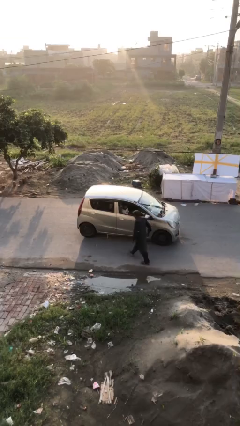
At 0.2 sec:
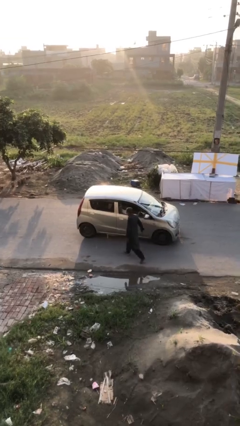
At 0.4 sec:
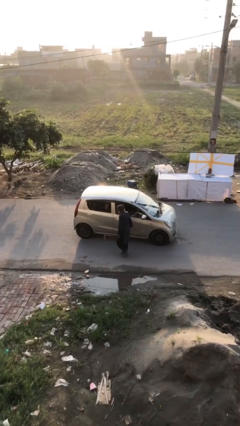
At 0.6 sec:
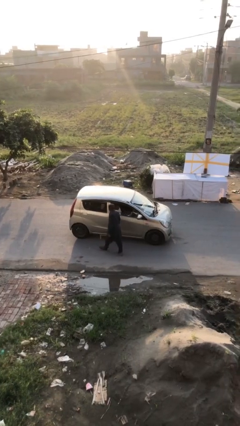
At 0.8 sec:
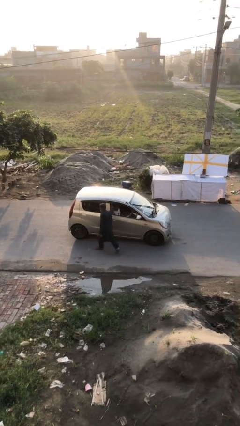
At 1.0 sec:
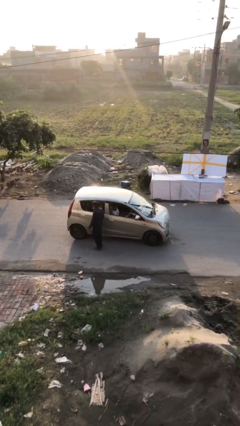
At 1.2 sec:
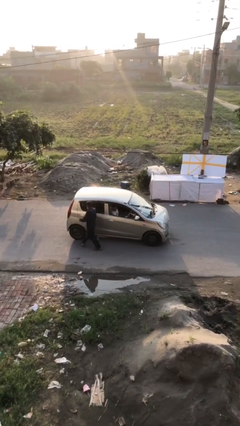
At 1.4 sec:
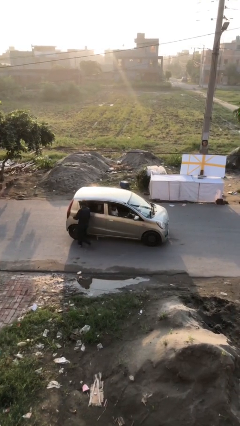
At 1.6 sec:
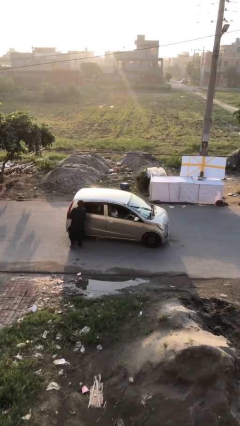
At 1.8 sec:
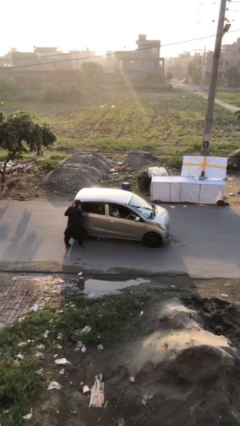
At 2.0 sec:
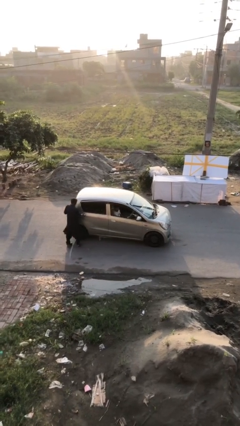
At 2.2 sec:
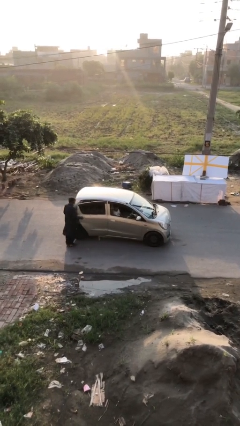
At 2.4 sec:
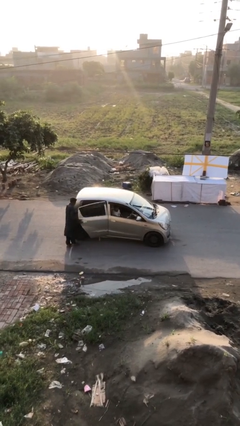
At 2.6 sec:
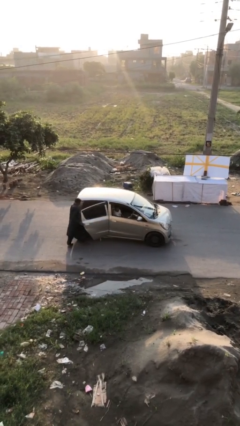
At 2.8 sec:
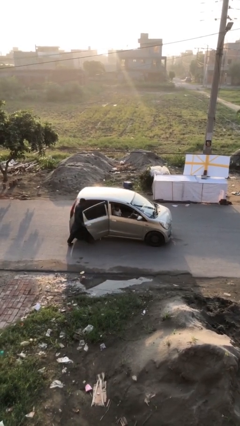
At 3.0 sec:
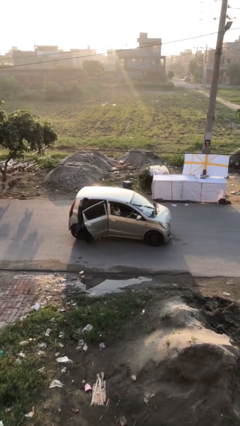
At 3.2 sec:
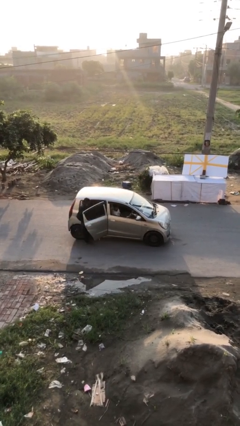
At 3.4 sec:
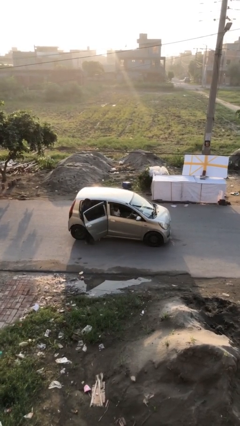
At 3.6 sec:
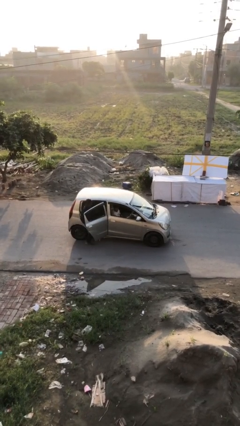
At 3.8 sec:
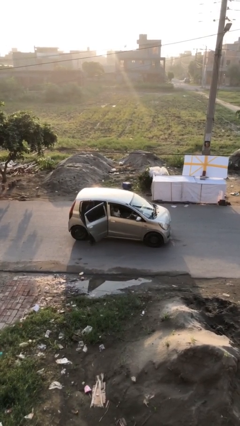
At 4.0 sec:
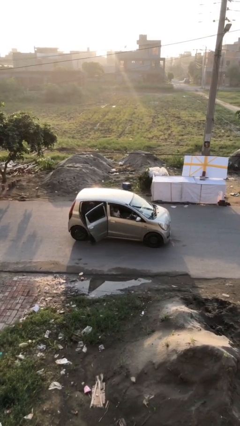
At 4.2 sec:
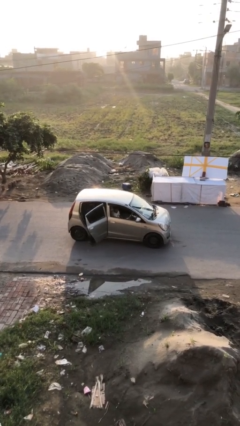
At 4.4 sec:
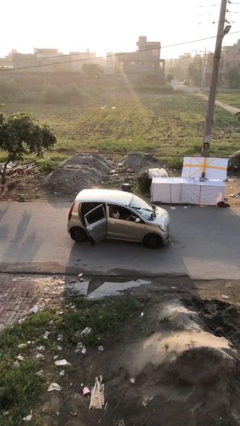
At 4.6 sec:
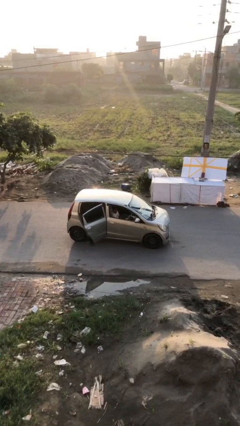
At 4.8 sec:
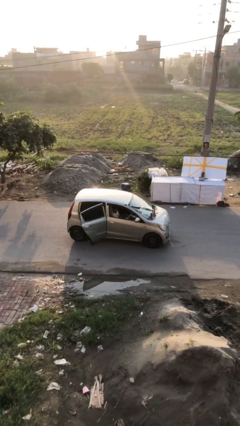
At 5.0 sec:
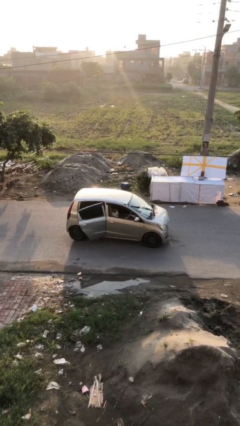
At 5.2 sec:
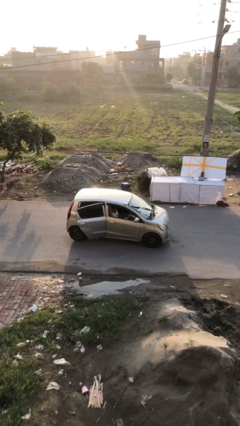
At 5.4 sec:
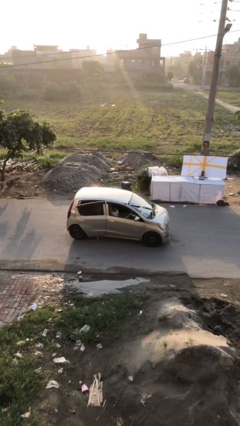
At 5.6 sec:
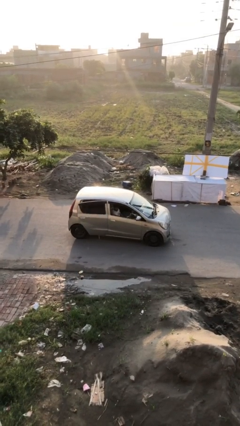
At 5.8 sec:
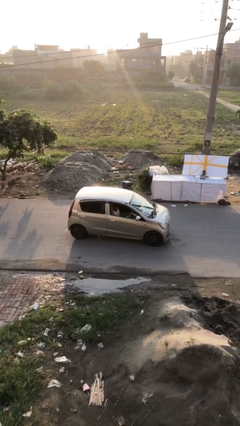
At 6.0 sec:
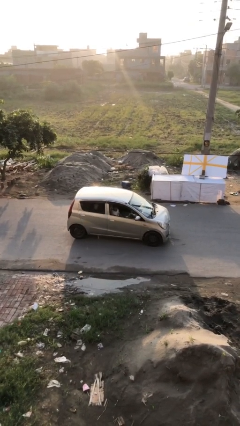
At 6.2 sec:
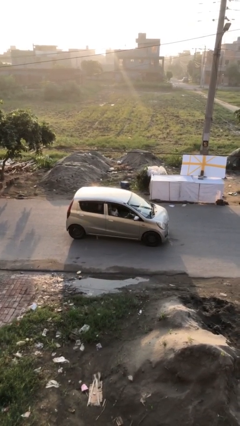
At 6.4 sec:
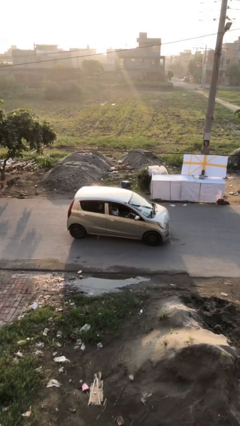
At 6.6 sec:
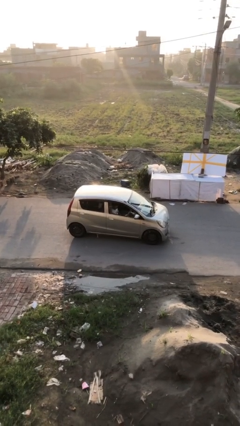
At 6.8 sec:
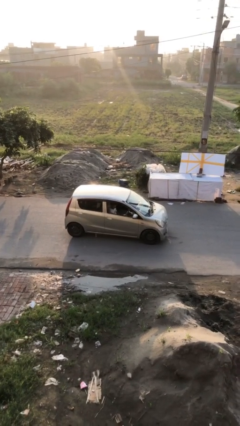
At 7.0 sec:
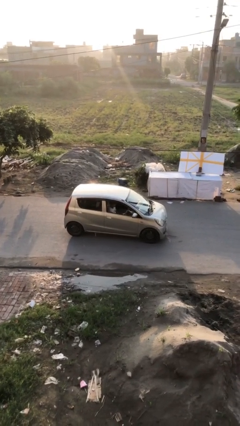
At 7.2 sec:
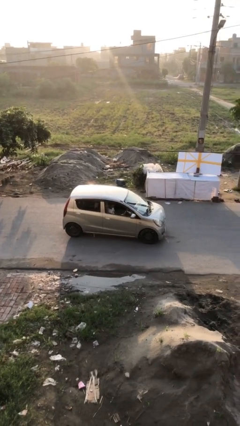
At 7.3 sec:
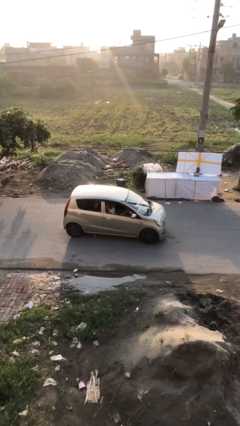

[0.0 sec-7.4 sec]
car picks up person

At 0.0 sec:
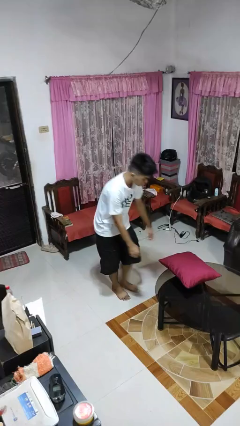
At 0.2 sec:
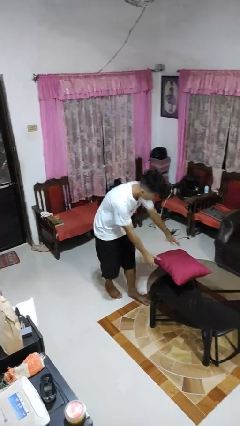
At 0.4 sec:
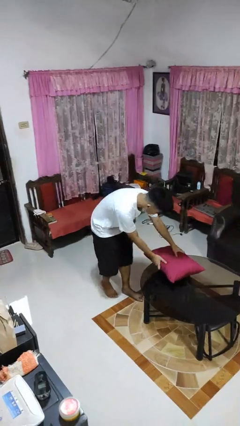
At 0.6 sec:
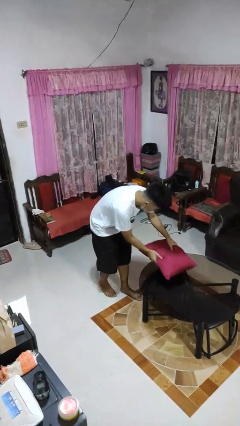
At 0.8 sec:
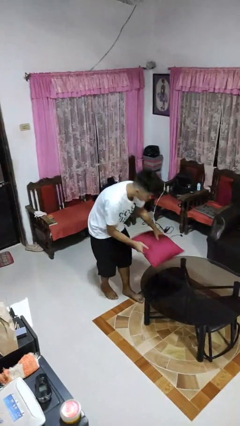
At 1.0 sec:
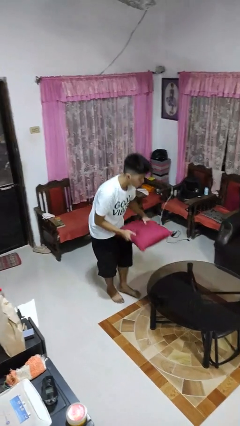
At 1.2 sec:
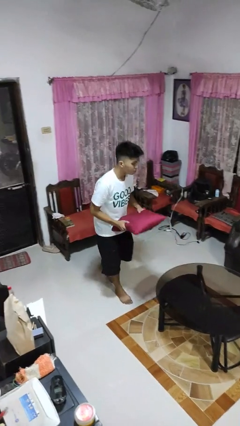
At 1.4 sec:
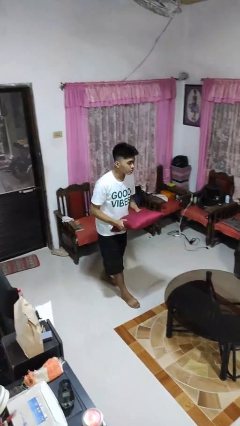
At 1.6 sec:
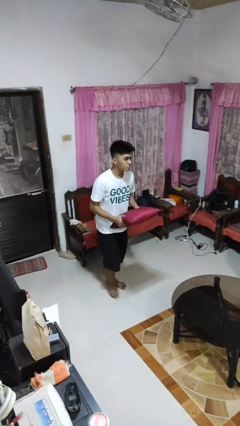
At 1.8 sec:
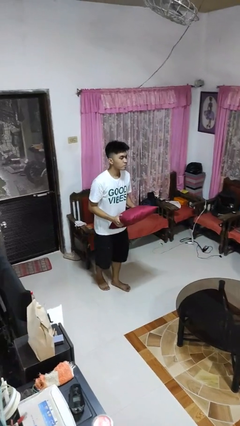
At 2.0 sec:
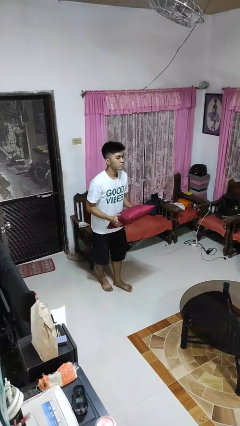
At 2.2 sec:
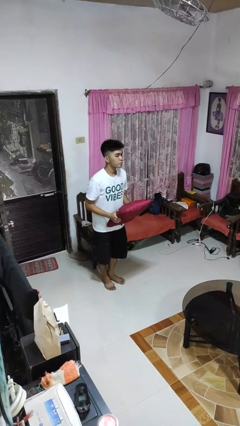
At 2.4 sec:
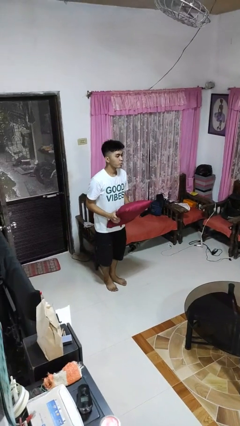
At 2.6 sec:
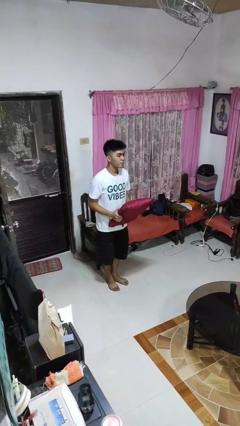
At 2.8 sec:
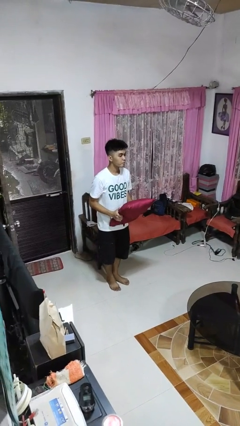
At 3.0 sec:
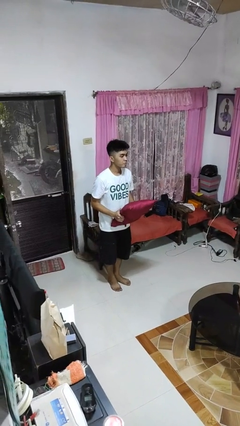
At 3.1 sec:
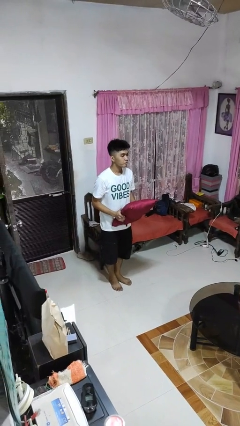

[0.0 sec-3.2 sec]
person picks up object from table

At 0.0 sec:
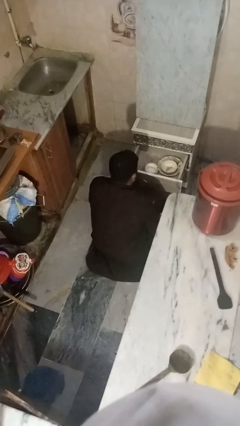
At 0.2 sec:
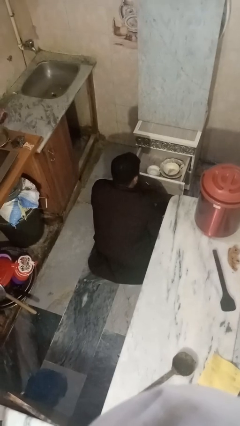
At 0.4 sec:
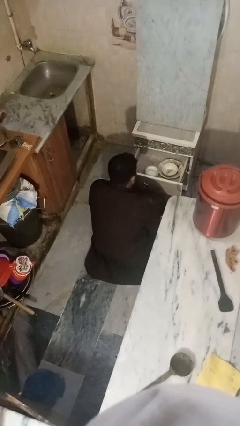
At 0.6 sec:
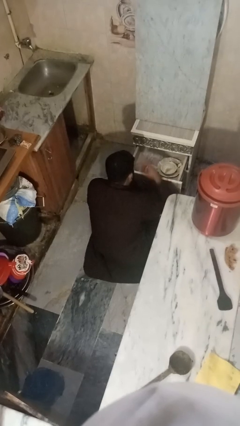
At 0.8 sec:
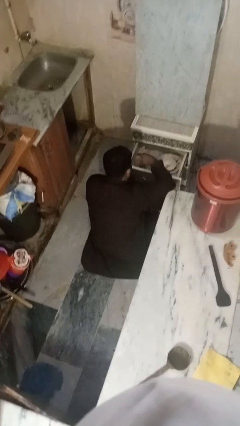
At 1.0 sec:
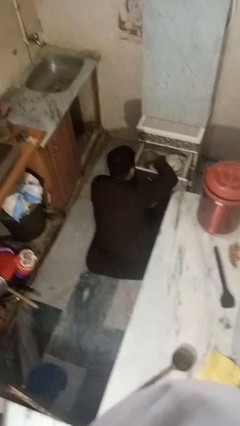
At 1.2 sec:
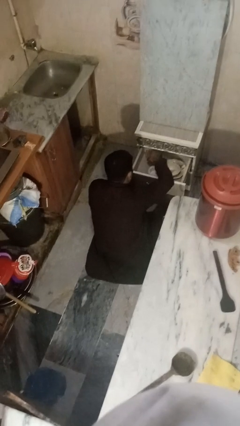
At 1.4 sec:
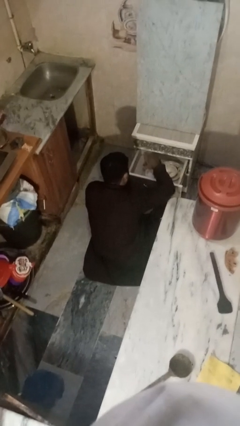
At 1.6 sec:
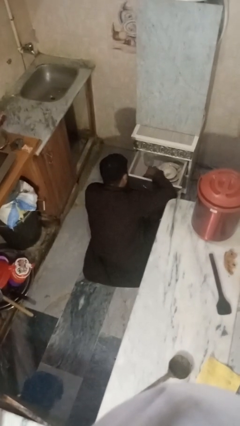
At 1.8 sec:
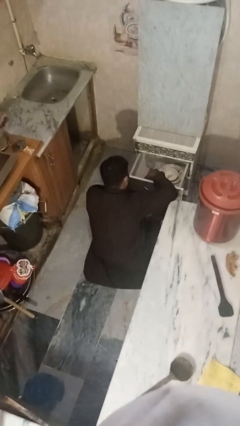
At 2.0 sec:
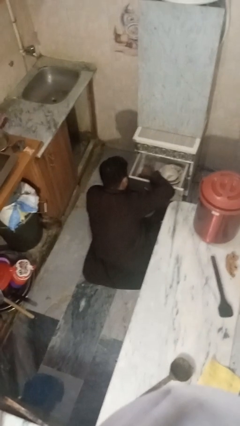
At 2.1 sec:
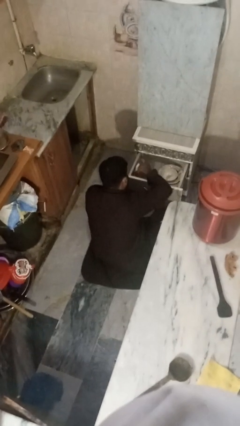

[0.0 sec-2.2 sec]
person searches in kitchen drawer

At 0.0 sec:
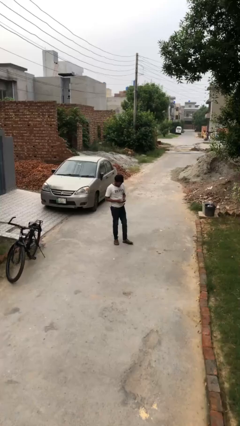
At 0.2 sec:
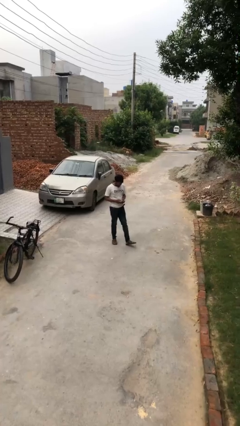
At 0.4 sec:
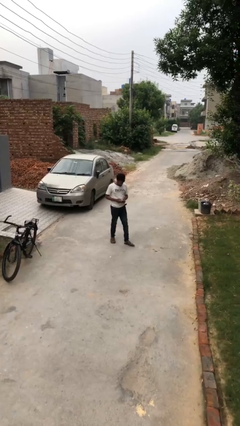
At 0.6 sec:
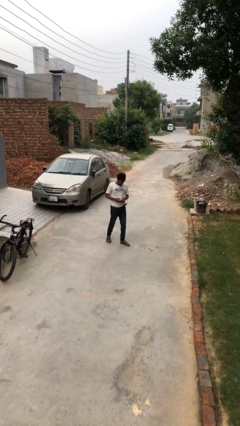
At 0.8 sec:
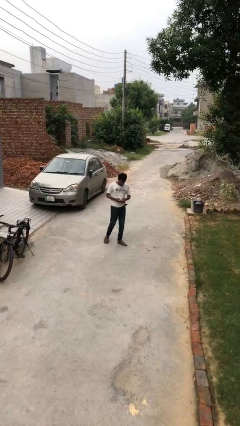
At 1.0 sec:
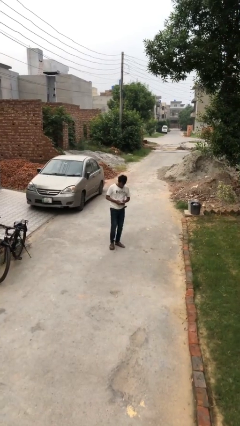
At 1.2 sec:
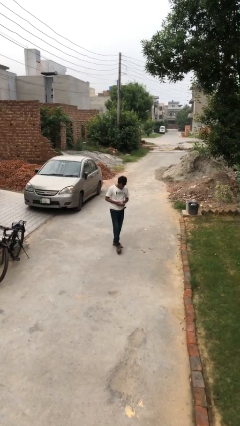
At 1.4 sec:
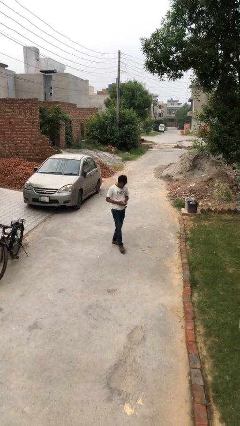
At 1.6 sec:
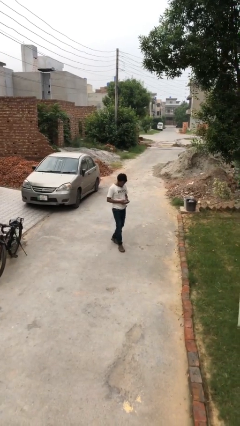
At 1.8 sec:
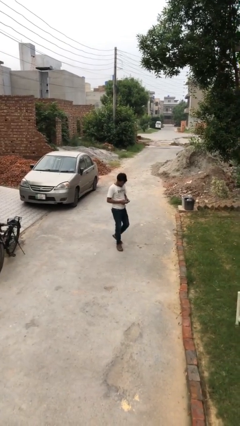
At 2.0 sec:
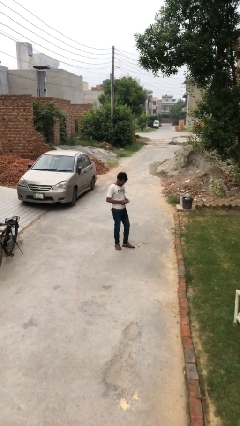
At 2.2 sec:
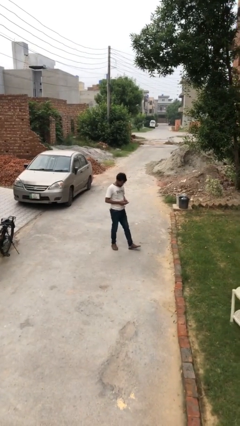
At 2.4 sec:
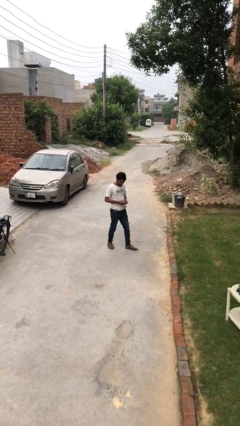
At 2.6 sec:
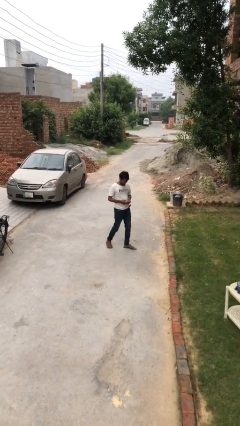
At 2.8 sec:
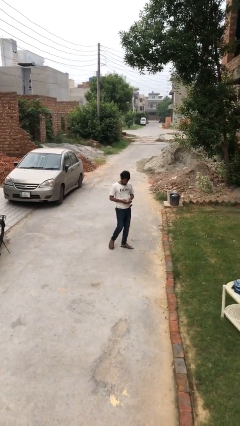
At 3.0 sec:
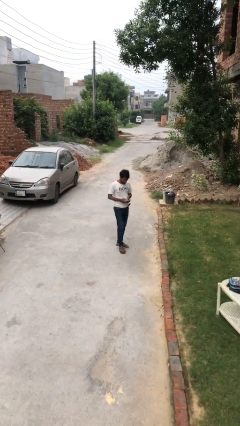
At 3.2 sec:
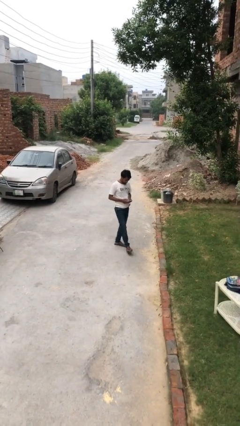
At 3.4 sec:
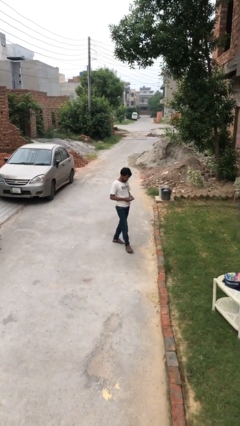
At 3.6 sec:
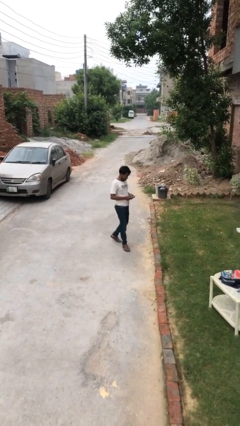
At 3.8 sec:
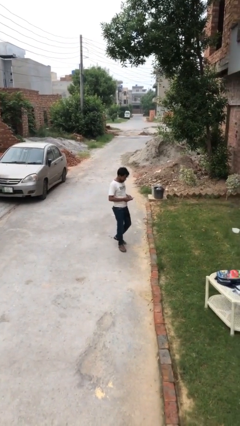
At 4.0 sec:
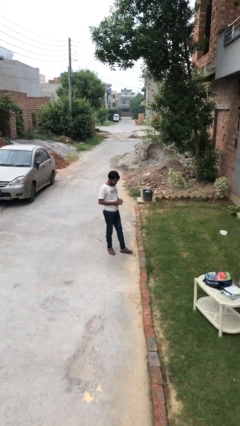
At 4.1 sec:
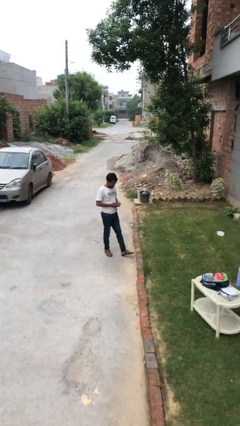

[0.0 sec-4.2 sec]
person texts on phone

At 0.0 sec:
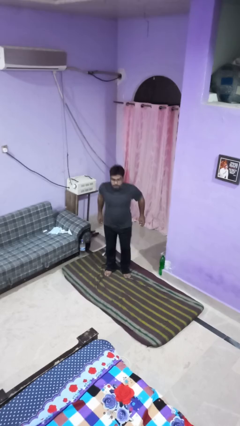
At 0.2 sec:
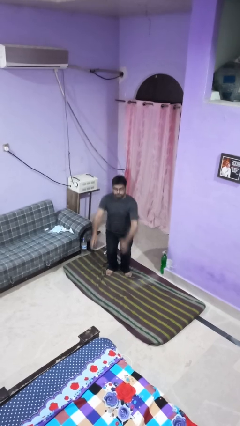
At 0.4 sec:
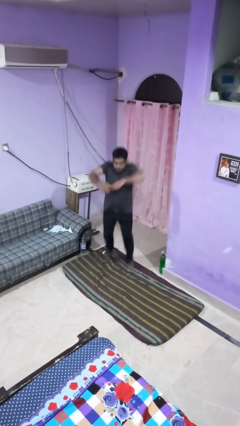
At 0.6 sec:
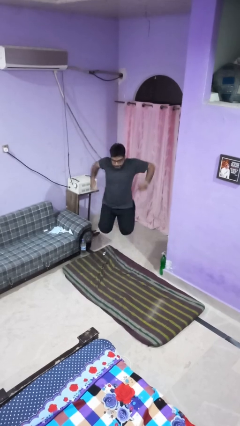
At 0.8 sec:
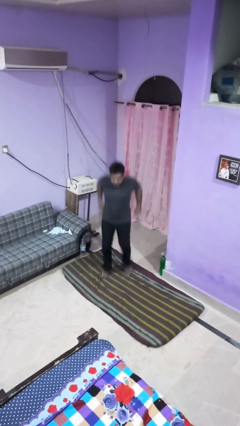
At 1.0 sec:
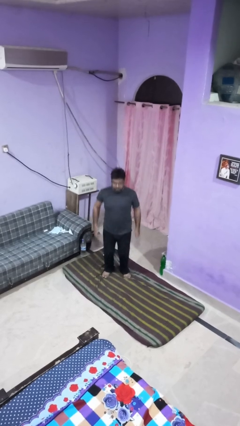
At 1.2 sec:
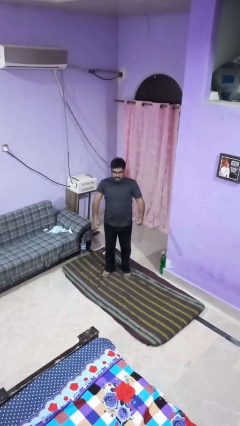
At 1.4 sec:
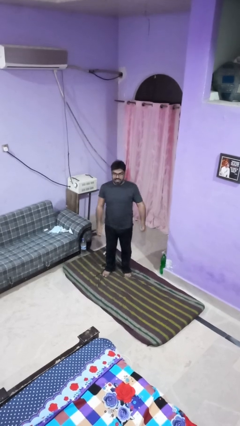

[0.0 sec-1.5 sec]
person jumps
